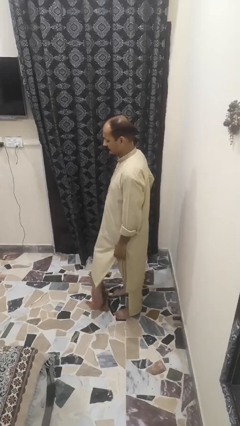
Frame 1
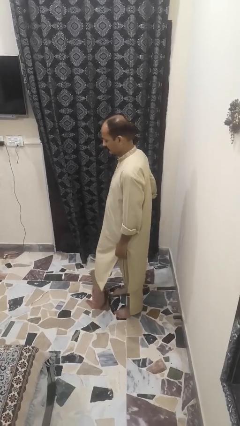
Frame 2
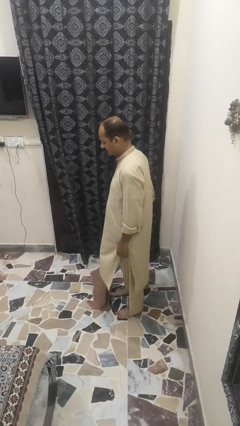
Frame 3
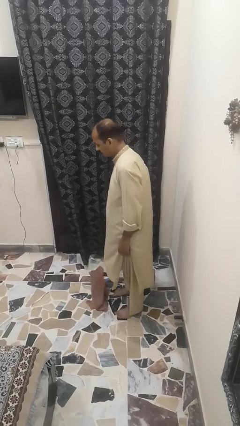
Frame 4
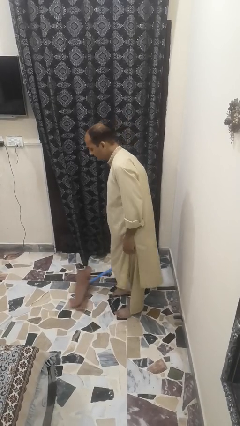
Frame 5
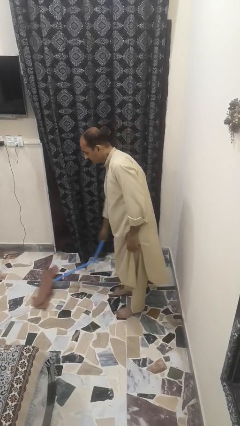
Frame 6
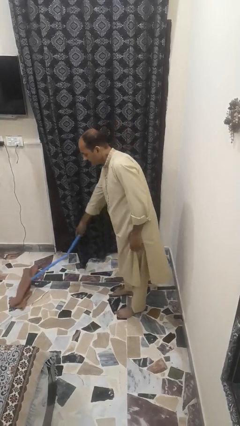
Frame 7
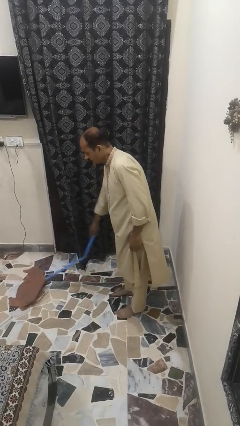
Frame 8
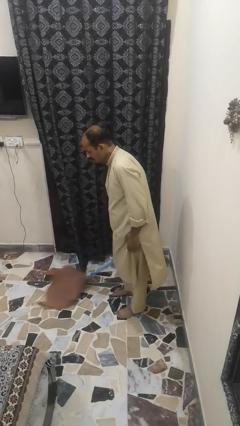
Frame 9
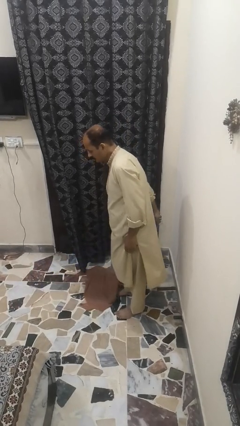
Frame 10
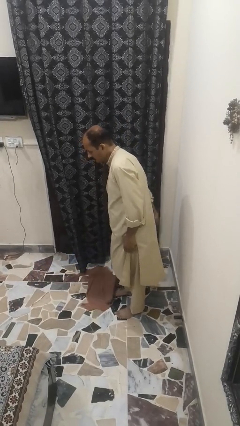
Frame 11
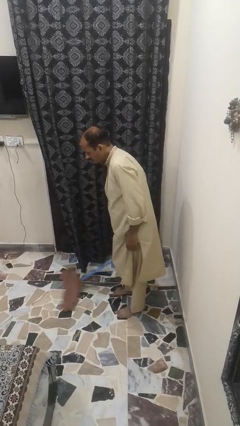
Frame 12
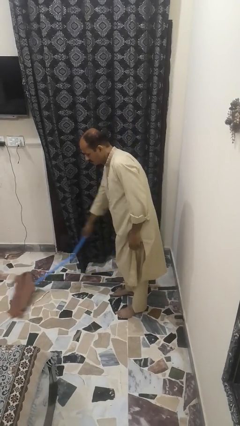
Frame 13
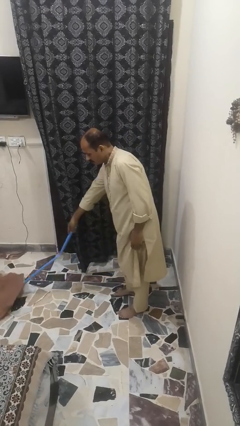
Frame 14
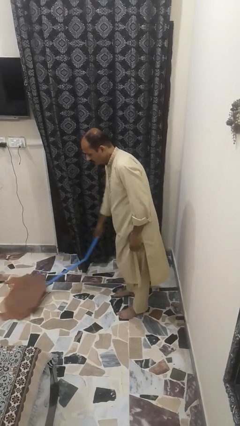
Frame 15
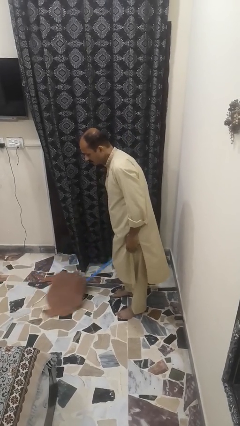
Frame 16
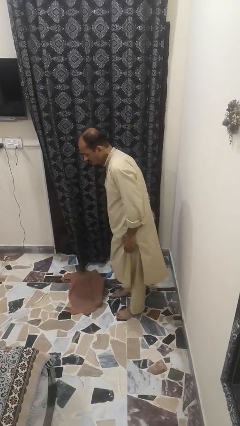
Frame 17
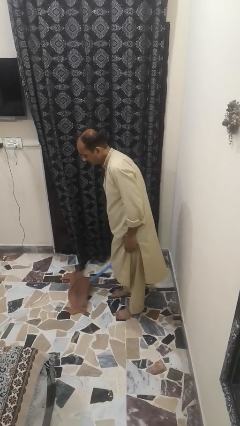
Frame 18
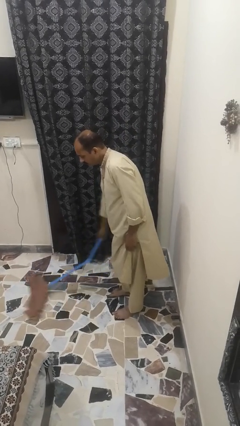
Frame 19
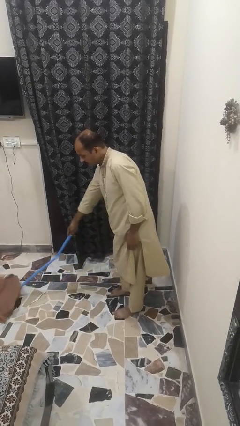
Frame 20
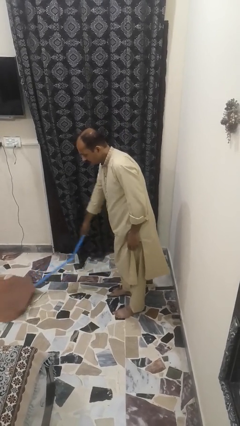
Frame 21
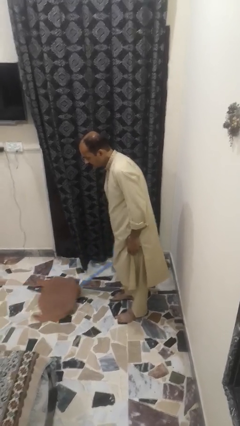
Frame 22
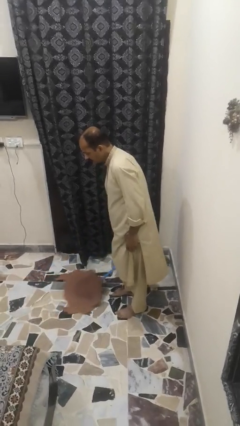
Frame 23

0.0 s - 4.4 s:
person mops

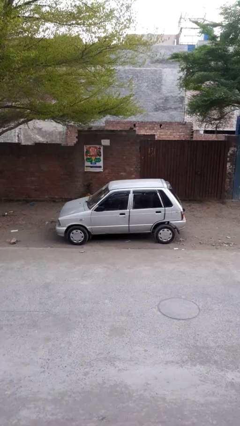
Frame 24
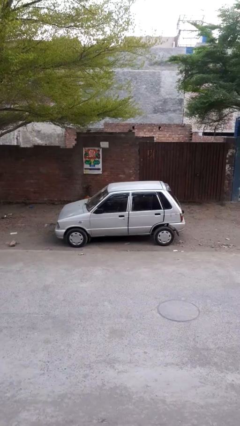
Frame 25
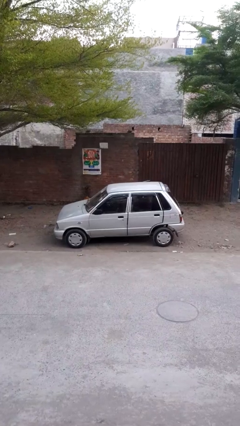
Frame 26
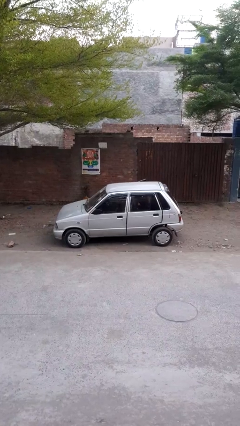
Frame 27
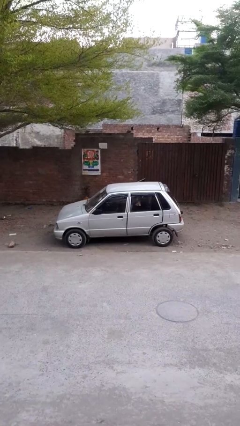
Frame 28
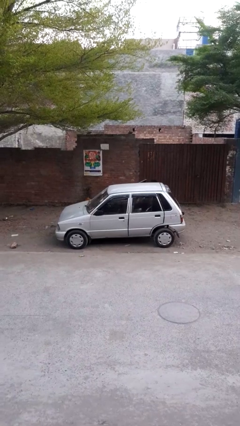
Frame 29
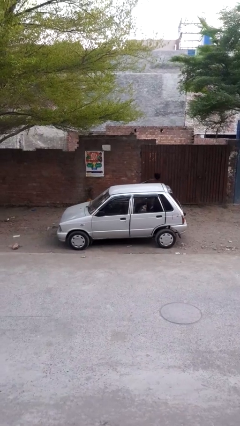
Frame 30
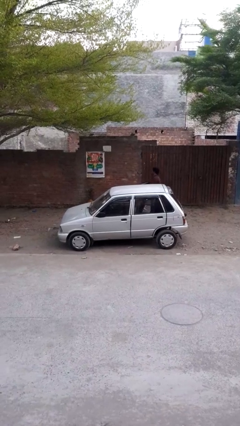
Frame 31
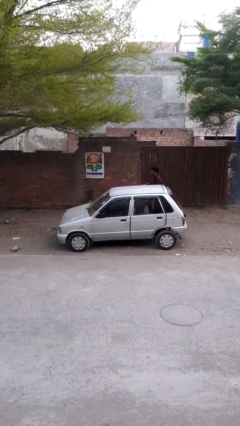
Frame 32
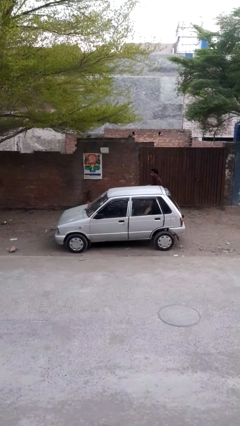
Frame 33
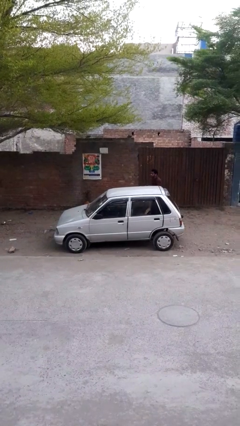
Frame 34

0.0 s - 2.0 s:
car drops off person

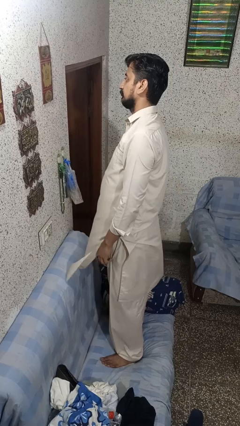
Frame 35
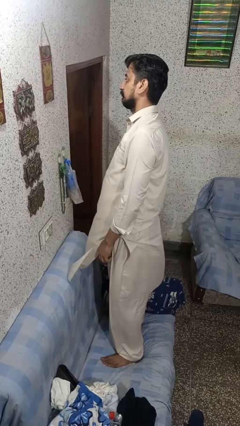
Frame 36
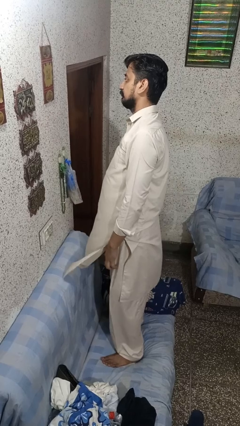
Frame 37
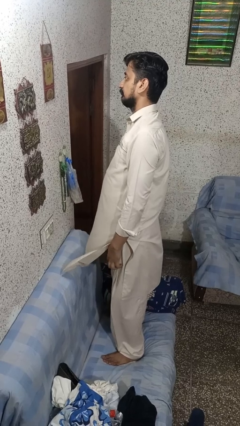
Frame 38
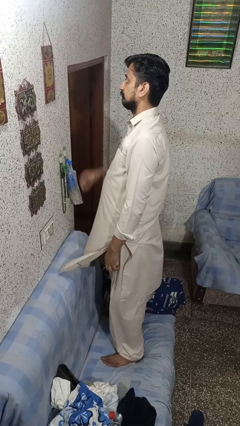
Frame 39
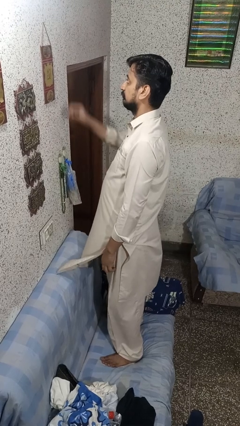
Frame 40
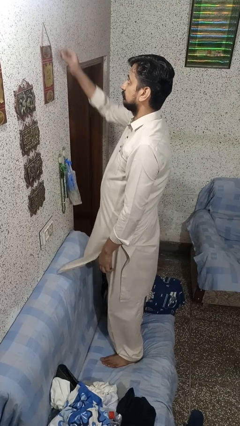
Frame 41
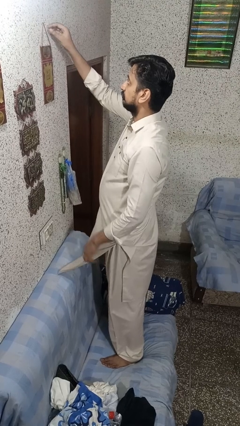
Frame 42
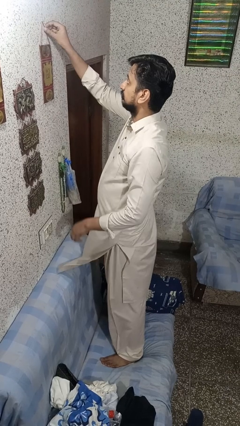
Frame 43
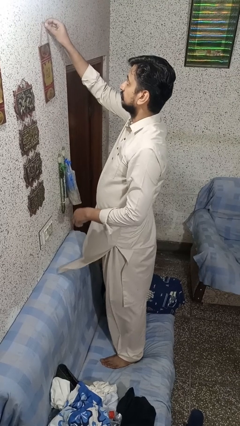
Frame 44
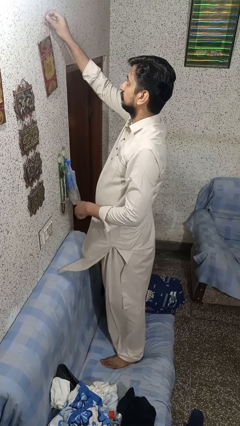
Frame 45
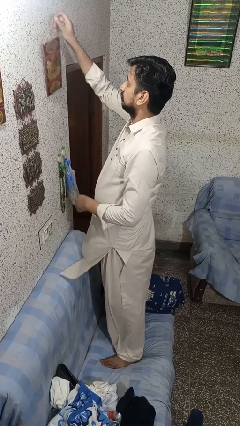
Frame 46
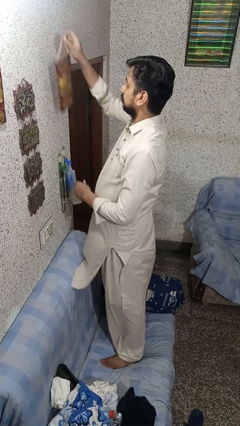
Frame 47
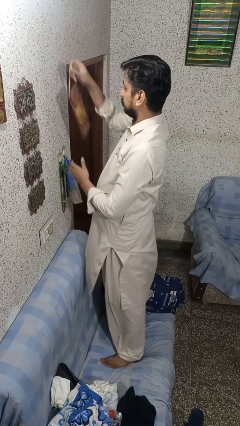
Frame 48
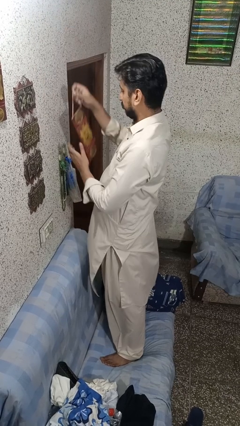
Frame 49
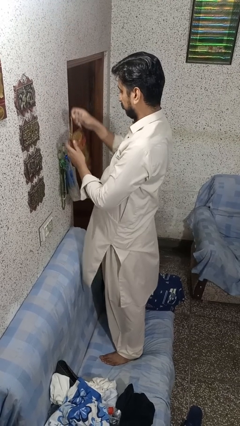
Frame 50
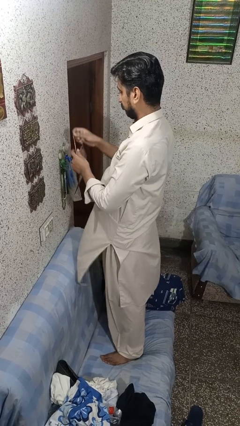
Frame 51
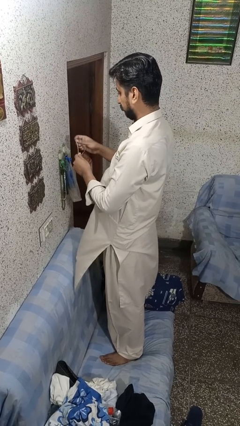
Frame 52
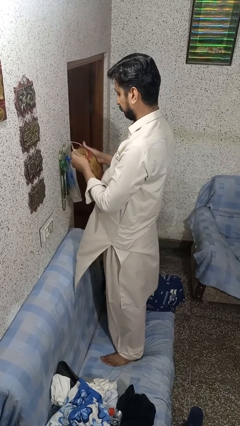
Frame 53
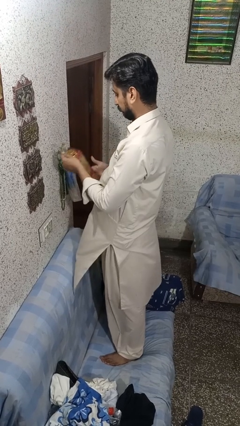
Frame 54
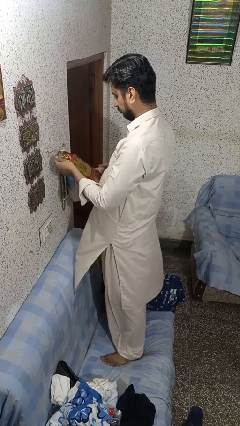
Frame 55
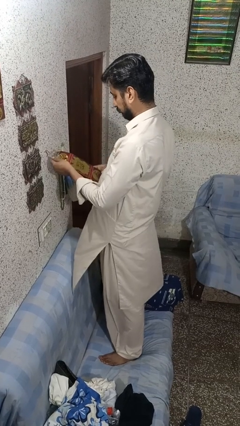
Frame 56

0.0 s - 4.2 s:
person takes down picture frame

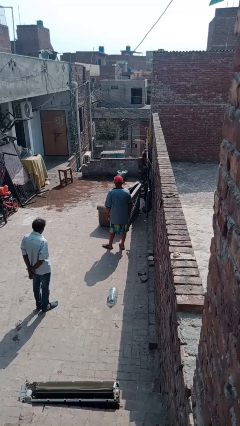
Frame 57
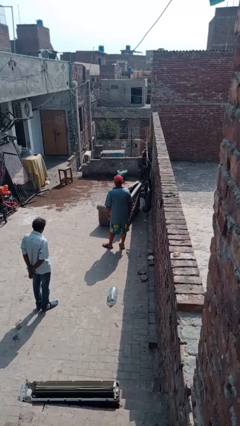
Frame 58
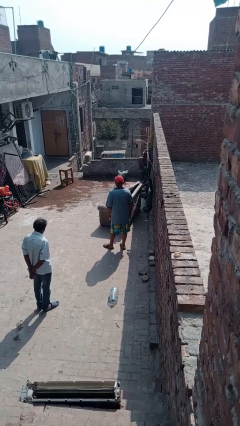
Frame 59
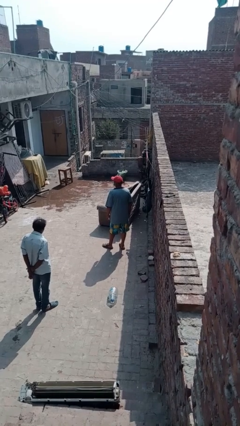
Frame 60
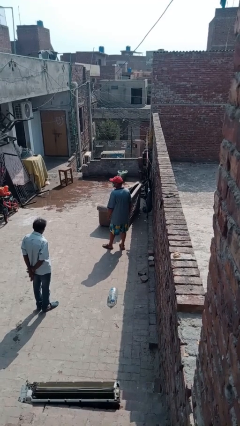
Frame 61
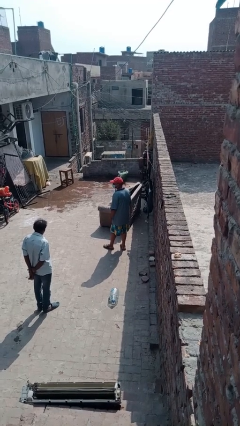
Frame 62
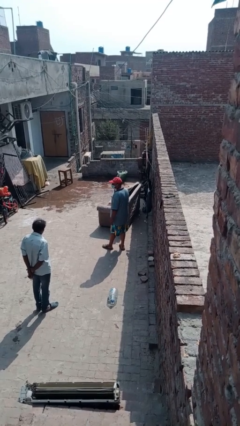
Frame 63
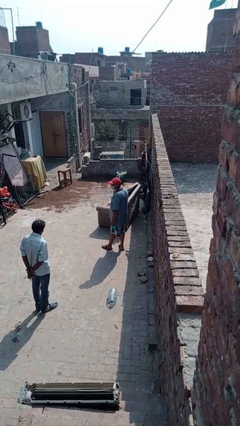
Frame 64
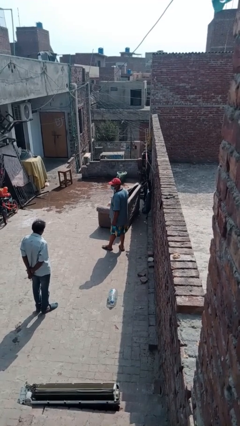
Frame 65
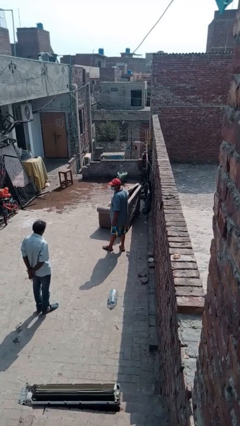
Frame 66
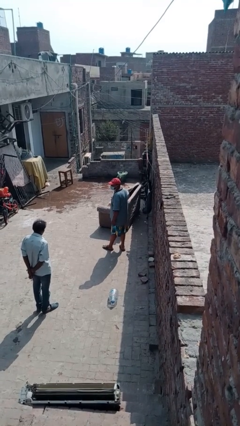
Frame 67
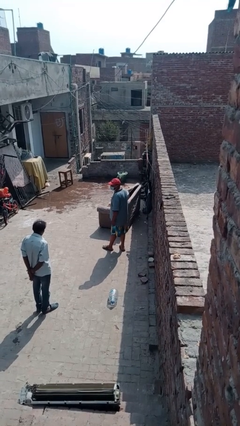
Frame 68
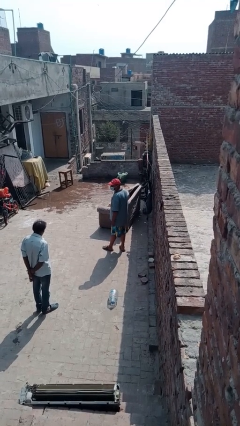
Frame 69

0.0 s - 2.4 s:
person looks over shoulder

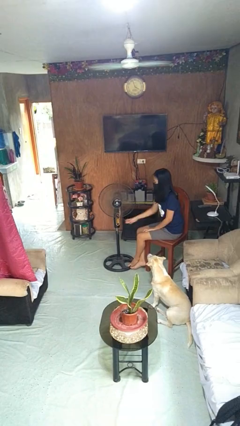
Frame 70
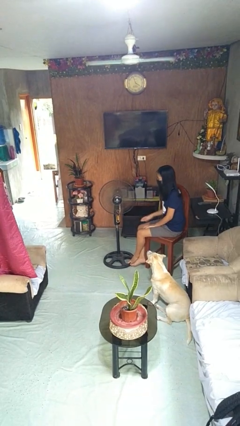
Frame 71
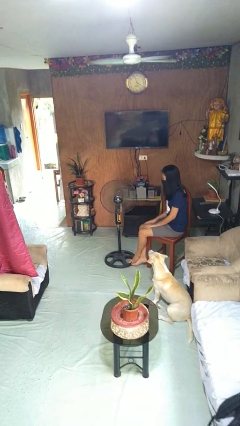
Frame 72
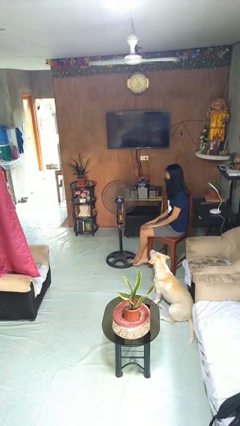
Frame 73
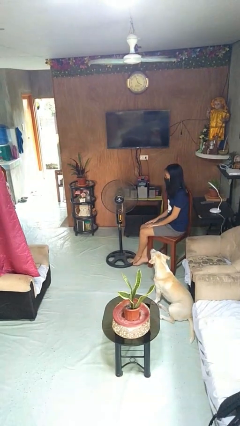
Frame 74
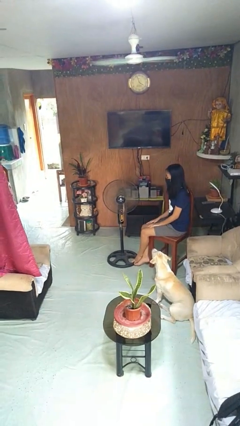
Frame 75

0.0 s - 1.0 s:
person turns on fan

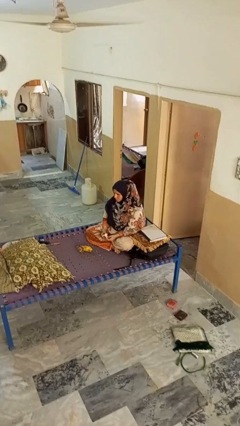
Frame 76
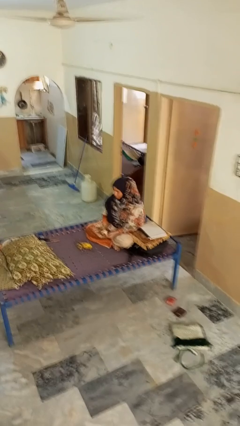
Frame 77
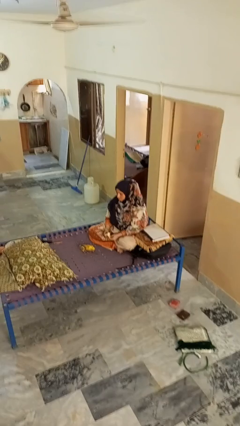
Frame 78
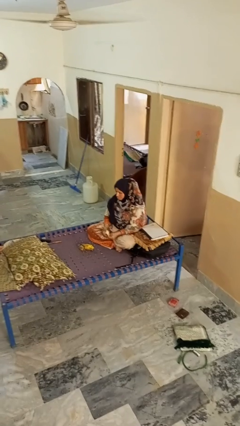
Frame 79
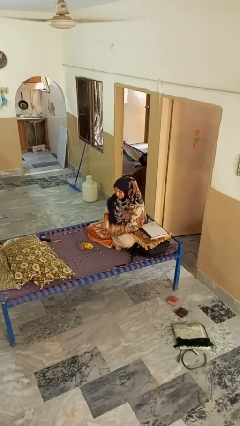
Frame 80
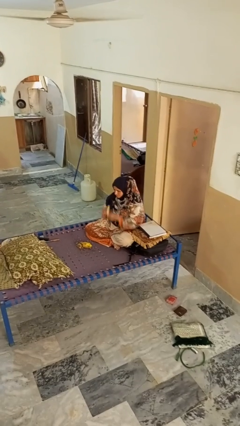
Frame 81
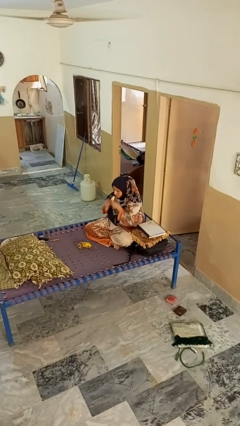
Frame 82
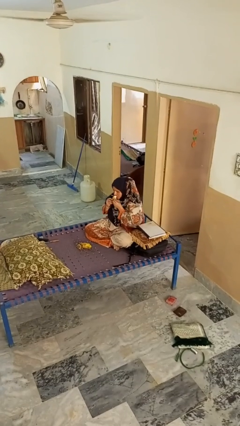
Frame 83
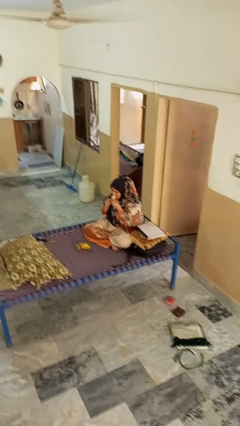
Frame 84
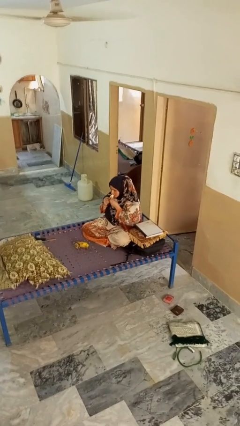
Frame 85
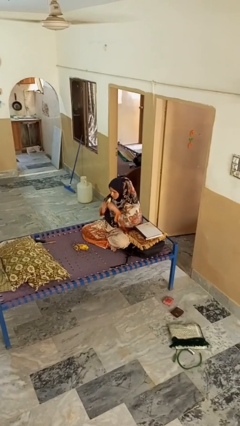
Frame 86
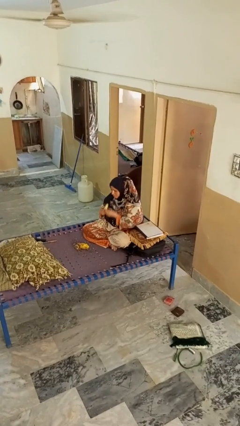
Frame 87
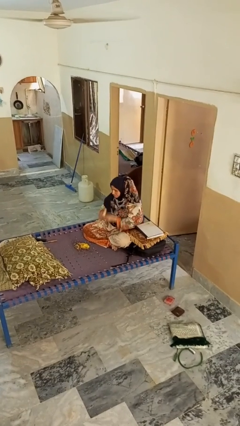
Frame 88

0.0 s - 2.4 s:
person eats banana

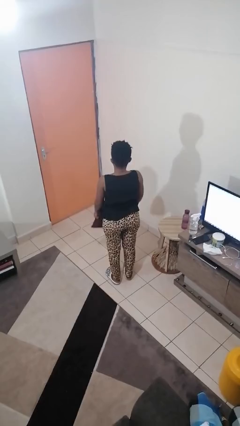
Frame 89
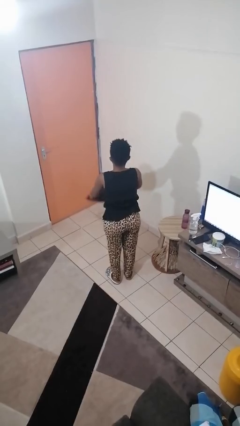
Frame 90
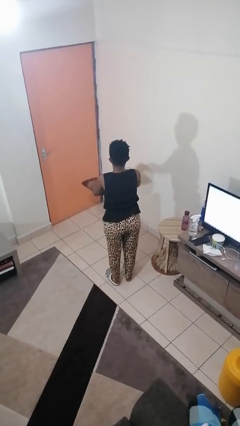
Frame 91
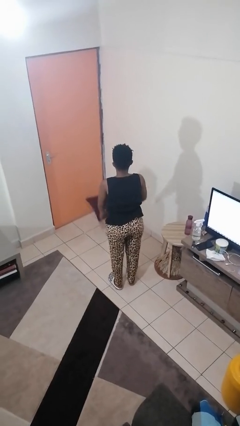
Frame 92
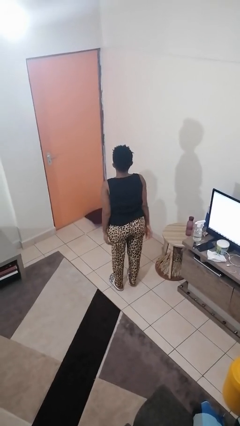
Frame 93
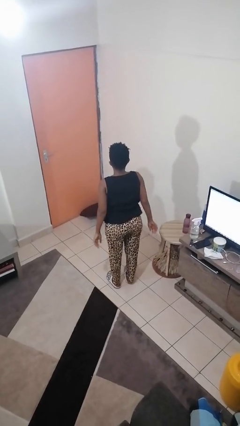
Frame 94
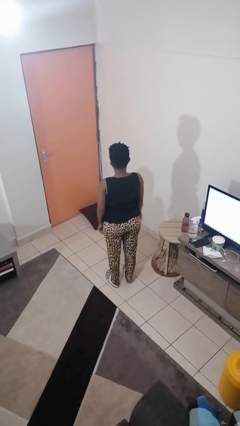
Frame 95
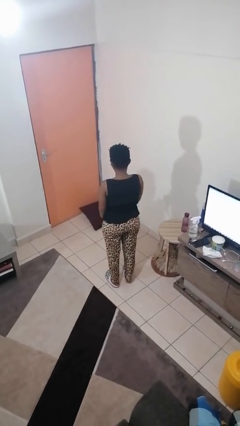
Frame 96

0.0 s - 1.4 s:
person throws object to ground
